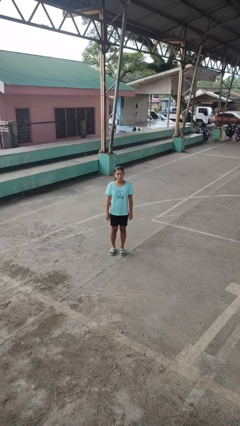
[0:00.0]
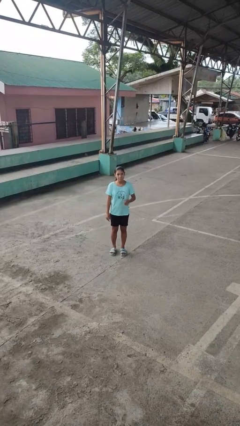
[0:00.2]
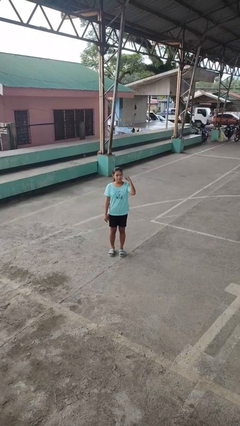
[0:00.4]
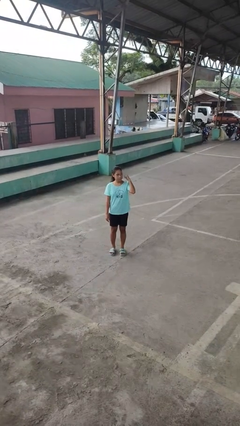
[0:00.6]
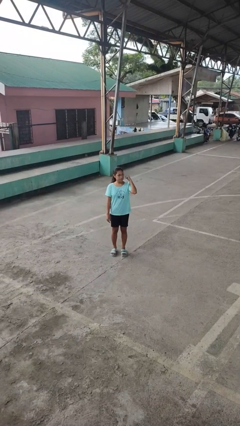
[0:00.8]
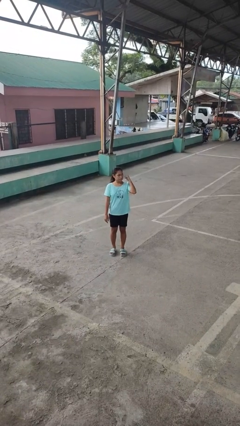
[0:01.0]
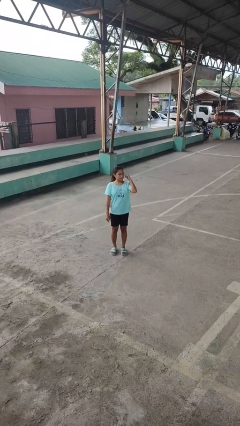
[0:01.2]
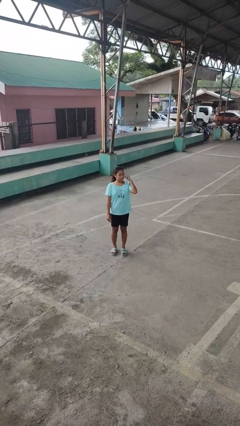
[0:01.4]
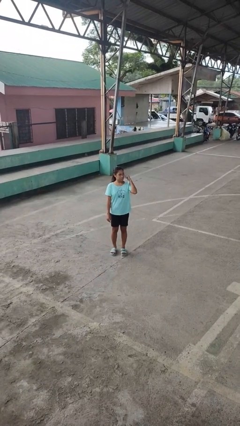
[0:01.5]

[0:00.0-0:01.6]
person gestures behind me

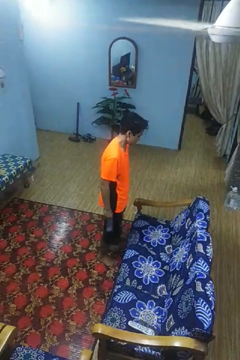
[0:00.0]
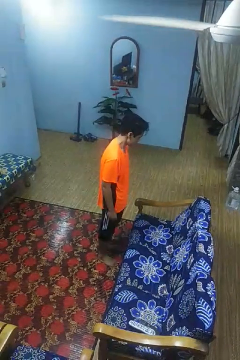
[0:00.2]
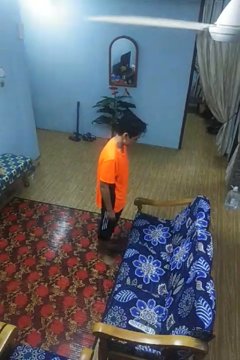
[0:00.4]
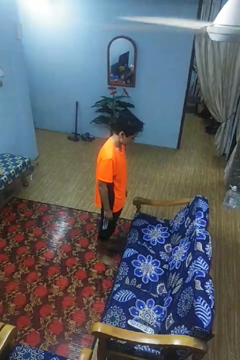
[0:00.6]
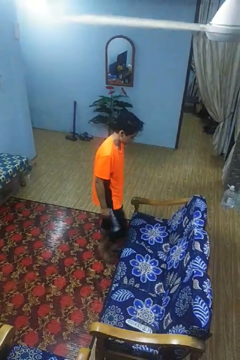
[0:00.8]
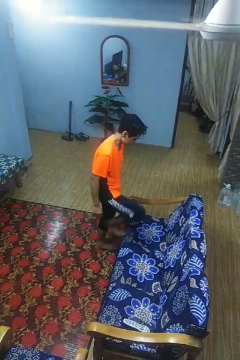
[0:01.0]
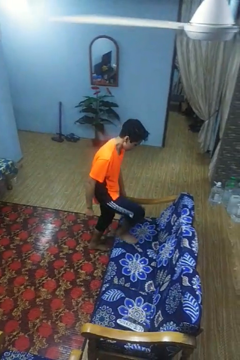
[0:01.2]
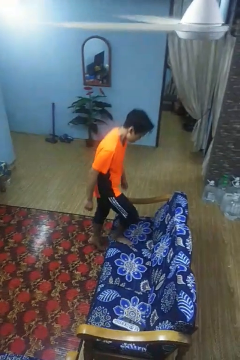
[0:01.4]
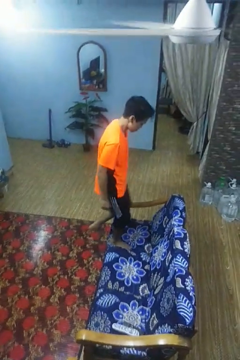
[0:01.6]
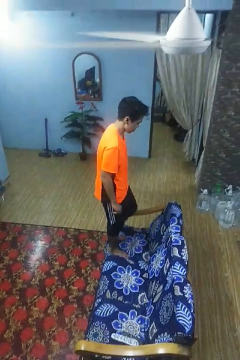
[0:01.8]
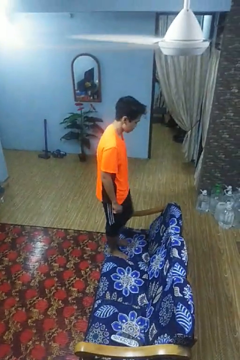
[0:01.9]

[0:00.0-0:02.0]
person climbs on couch

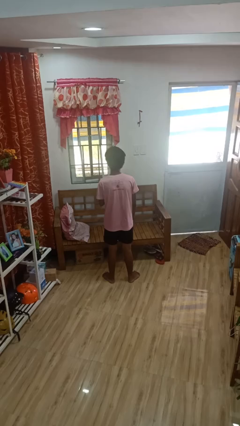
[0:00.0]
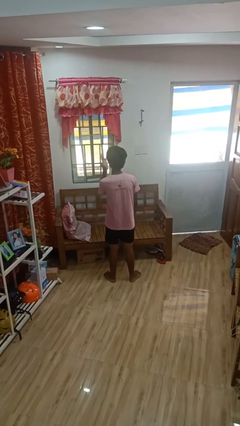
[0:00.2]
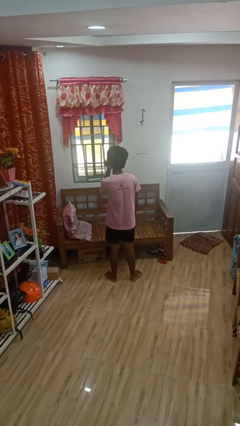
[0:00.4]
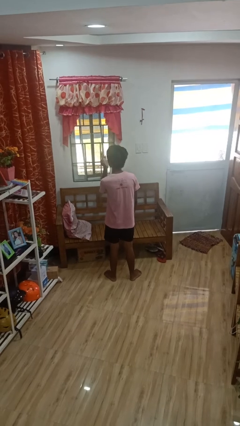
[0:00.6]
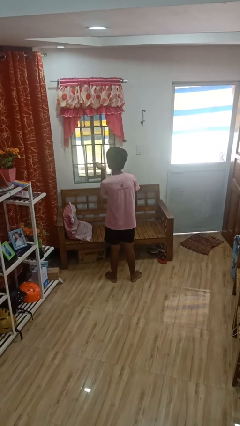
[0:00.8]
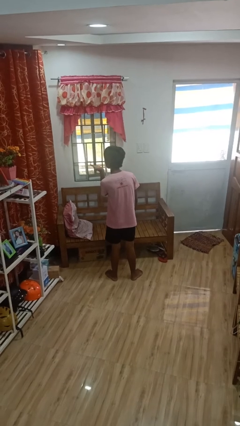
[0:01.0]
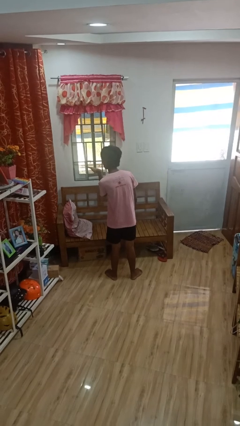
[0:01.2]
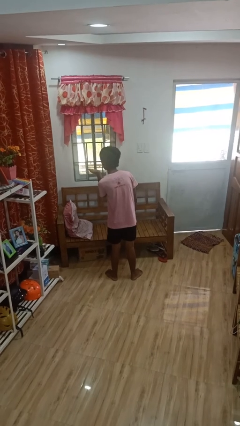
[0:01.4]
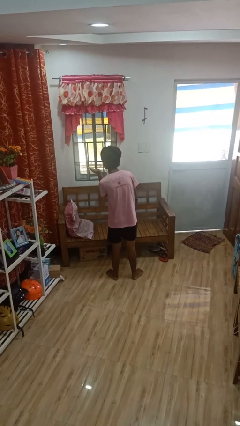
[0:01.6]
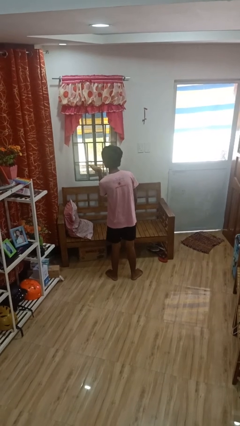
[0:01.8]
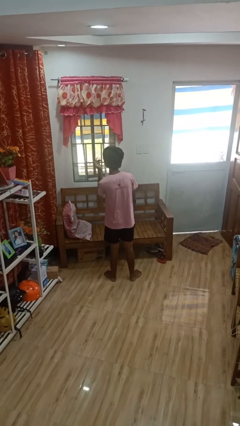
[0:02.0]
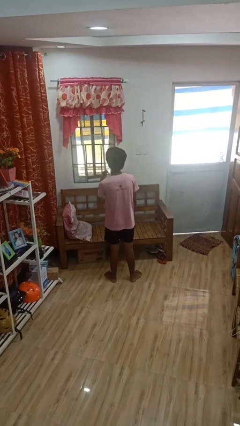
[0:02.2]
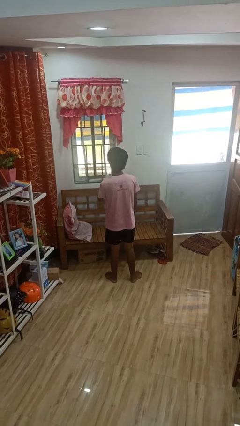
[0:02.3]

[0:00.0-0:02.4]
person gestures blow kiss

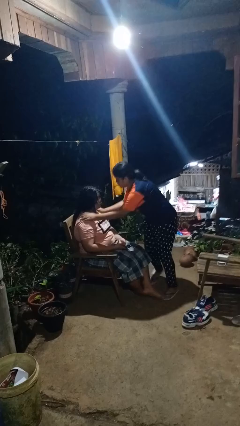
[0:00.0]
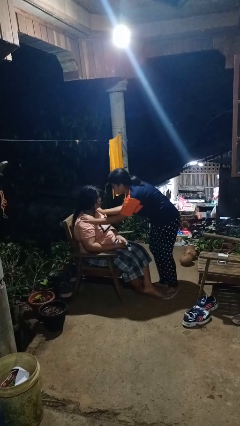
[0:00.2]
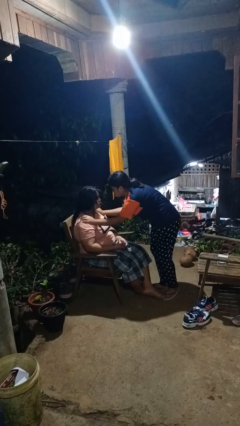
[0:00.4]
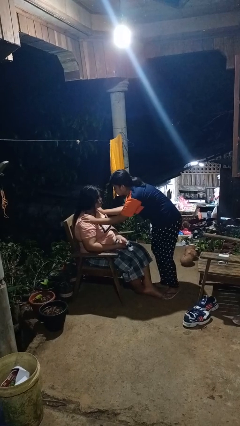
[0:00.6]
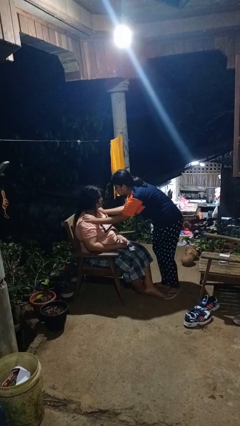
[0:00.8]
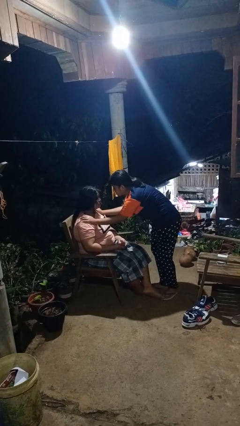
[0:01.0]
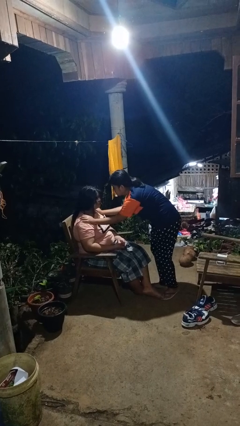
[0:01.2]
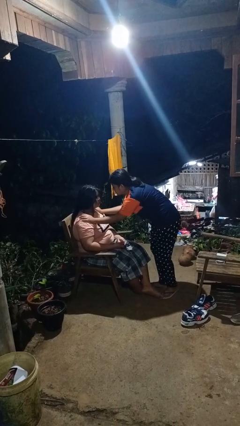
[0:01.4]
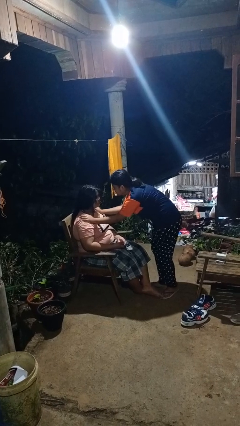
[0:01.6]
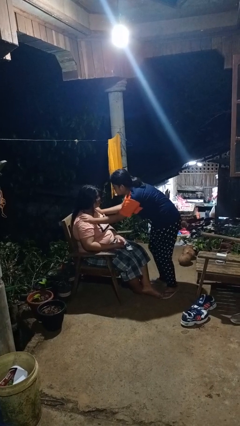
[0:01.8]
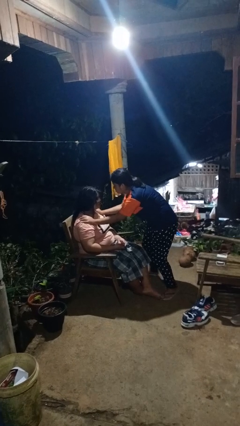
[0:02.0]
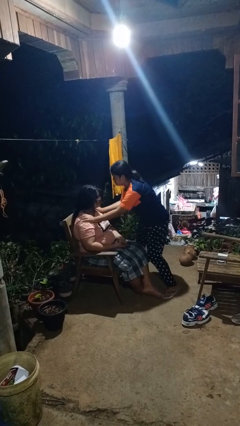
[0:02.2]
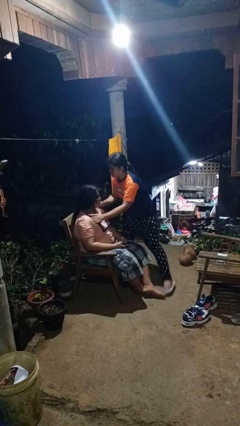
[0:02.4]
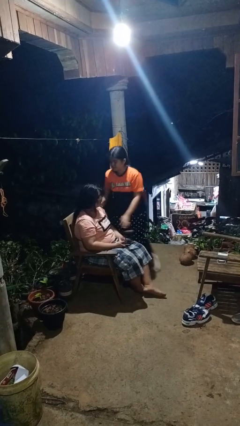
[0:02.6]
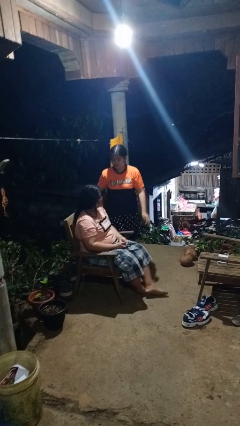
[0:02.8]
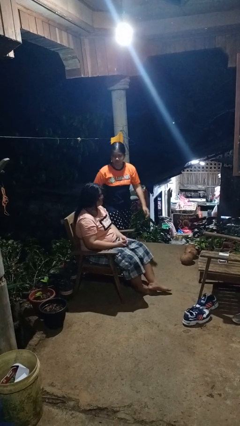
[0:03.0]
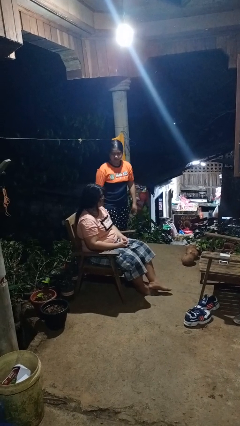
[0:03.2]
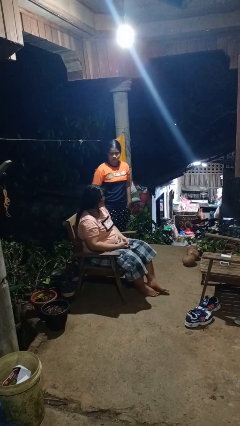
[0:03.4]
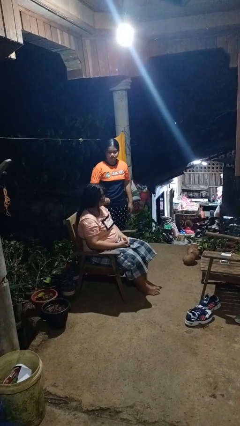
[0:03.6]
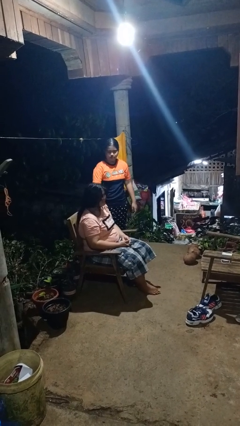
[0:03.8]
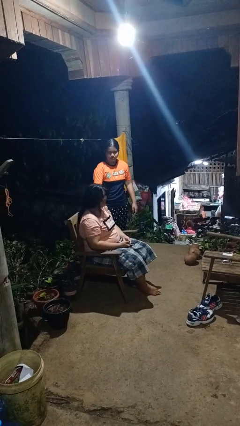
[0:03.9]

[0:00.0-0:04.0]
person spins person around

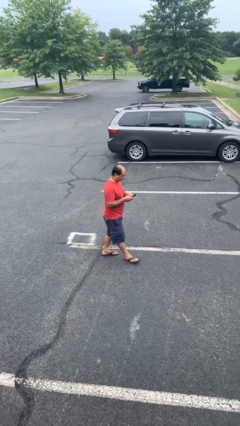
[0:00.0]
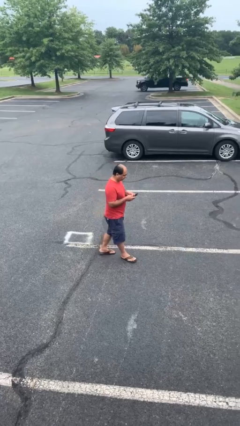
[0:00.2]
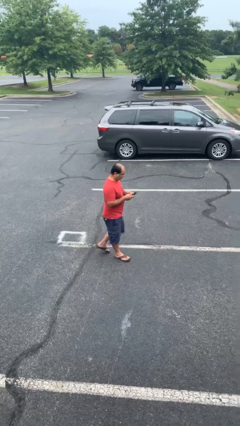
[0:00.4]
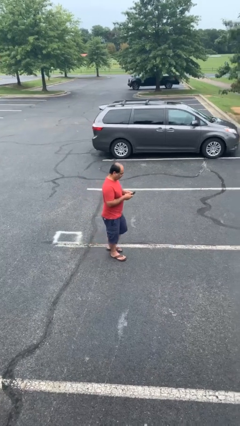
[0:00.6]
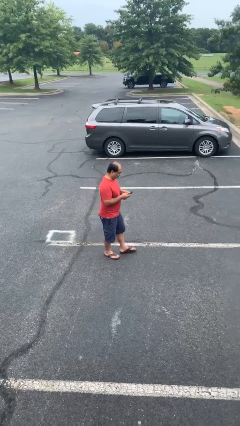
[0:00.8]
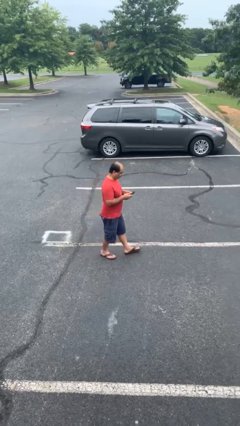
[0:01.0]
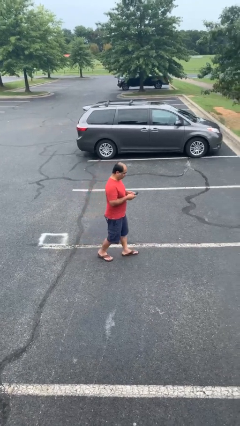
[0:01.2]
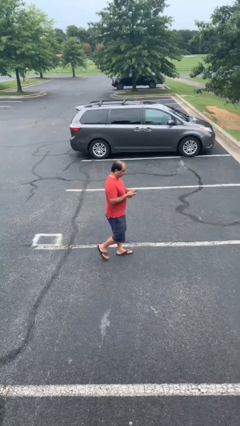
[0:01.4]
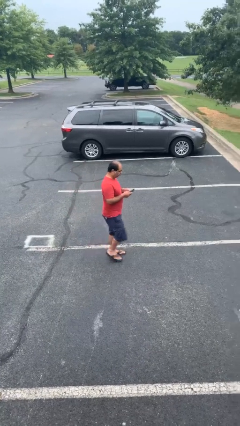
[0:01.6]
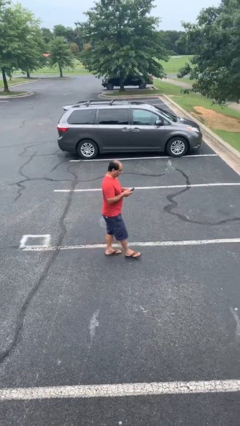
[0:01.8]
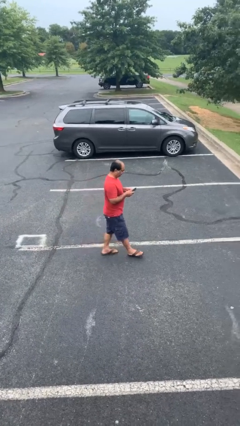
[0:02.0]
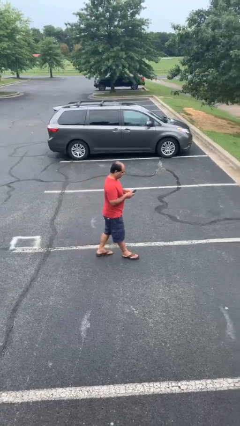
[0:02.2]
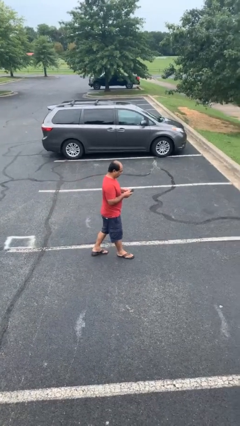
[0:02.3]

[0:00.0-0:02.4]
person texts on phone

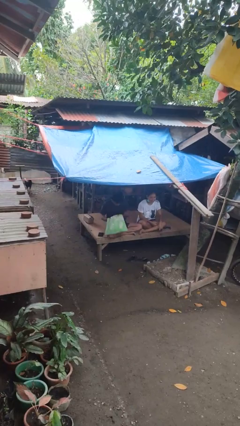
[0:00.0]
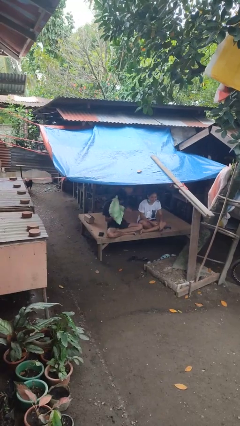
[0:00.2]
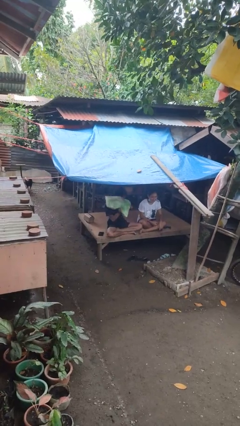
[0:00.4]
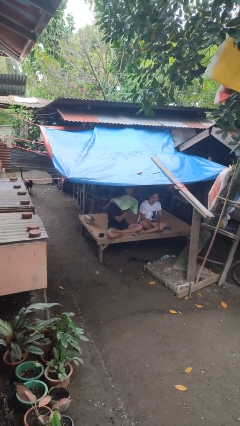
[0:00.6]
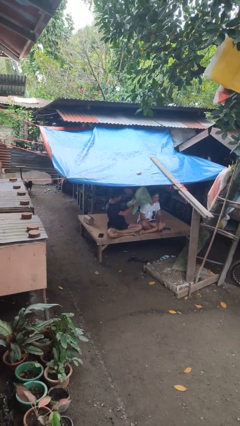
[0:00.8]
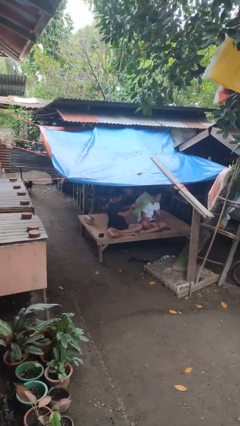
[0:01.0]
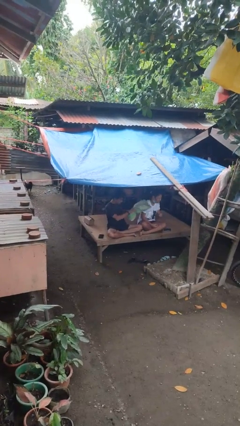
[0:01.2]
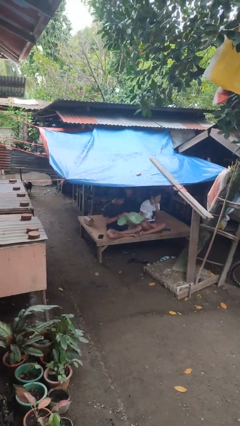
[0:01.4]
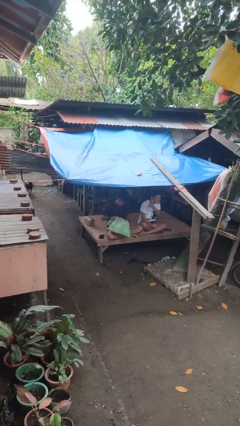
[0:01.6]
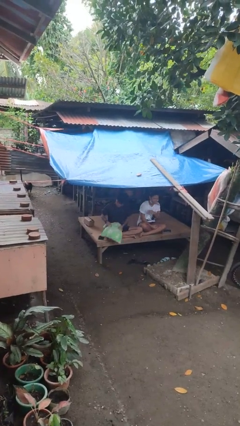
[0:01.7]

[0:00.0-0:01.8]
person hits person with pillow

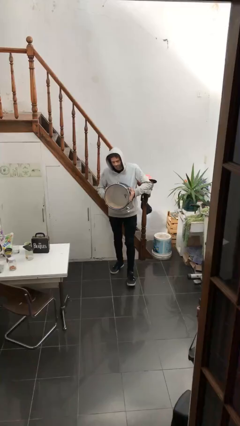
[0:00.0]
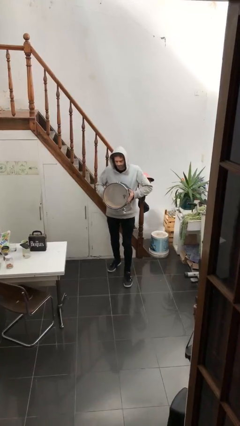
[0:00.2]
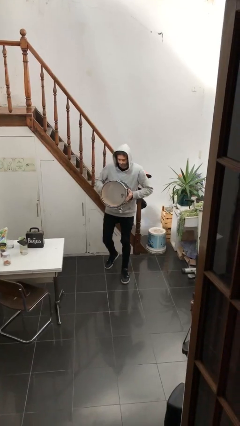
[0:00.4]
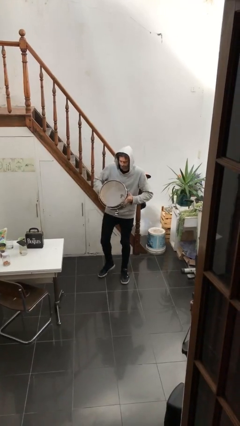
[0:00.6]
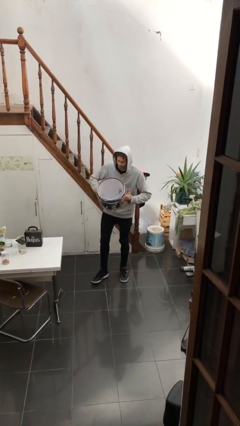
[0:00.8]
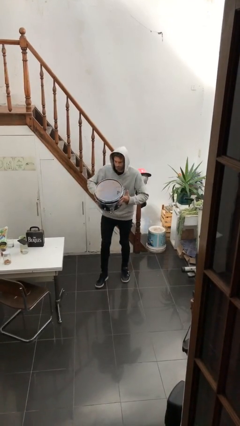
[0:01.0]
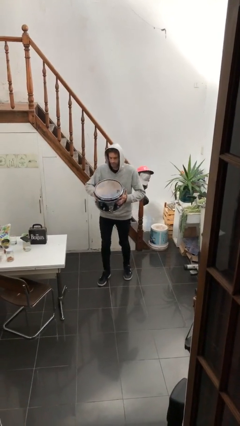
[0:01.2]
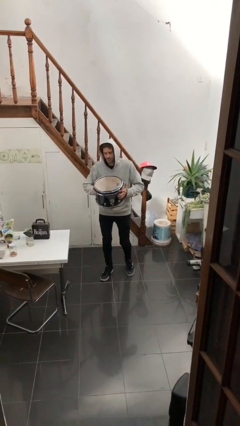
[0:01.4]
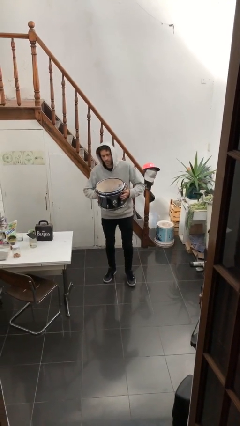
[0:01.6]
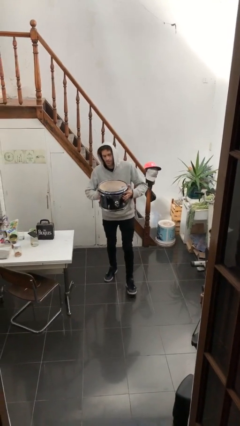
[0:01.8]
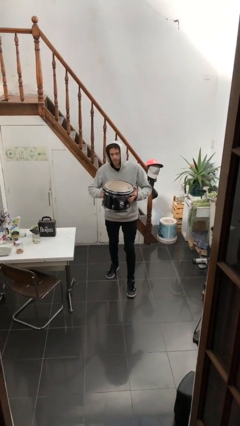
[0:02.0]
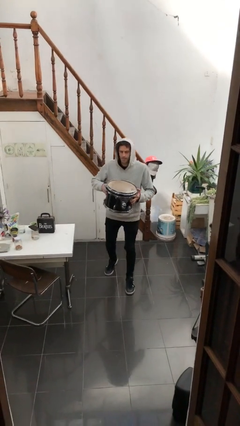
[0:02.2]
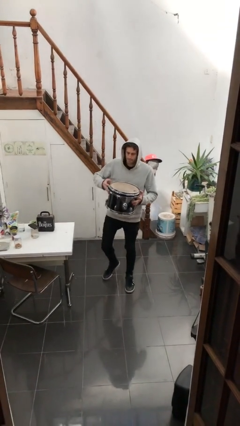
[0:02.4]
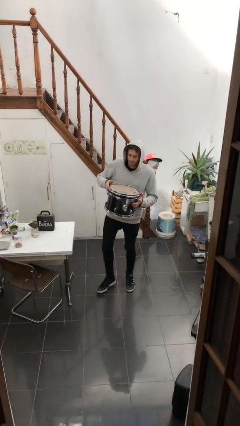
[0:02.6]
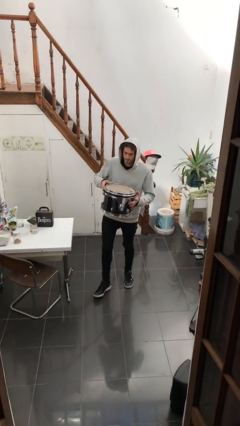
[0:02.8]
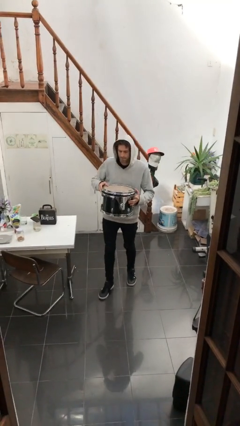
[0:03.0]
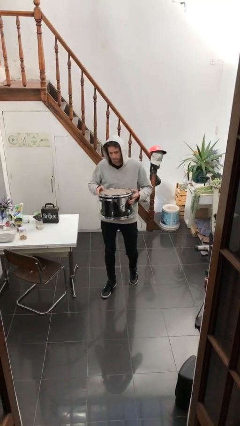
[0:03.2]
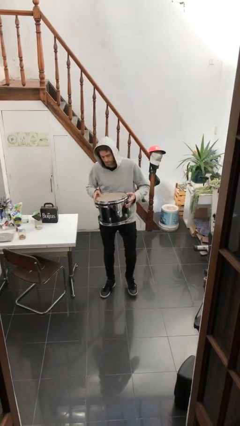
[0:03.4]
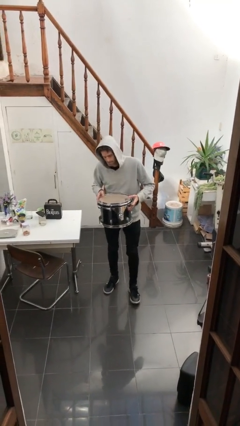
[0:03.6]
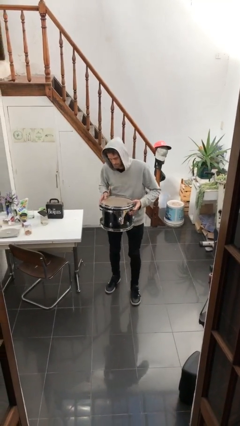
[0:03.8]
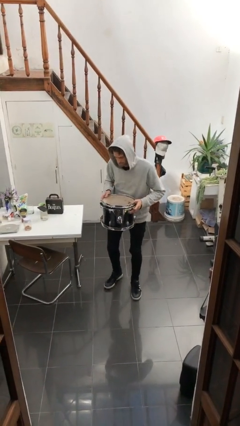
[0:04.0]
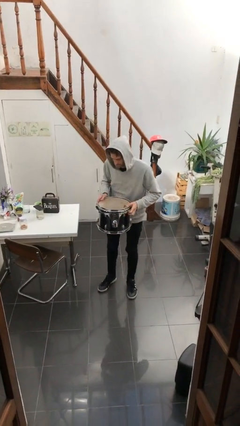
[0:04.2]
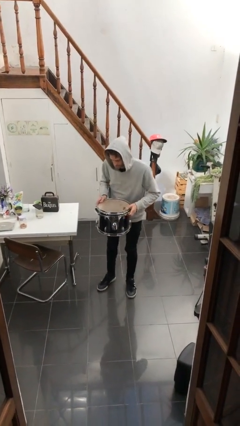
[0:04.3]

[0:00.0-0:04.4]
person carries heavy object
